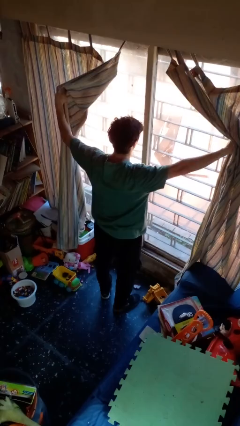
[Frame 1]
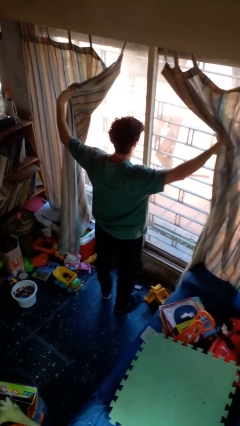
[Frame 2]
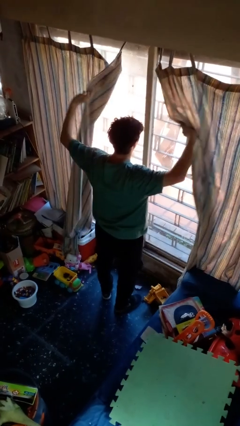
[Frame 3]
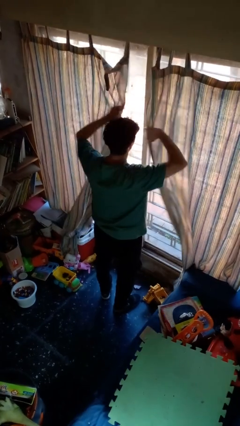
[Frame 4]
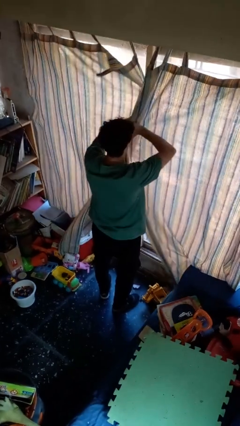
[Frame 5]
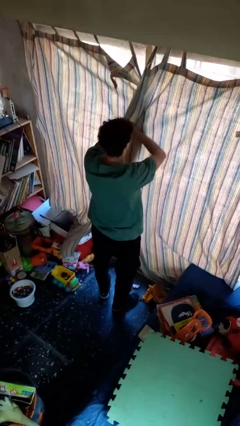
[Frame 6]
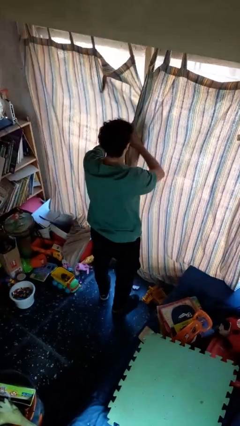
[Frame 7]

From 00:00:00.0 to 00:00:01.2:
person closes curtains

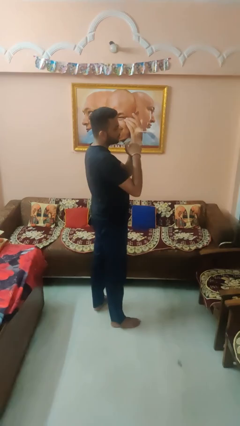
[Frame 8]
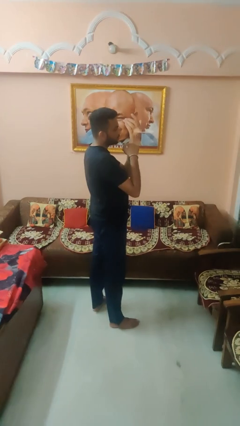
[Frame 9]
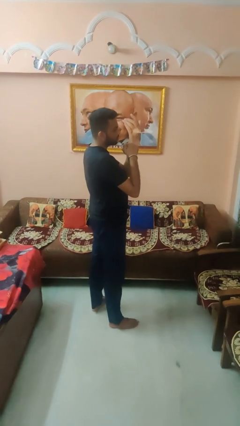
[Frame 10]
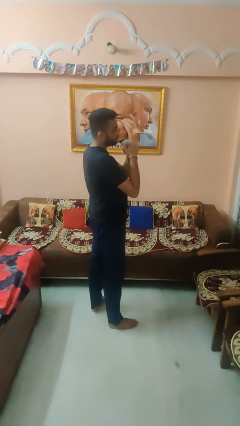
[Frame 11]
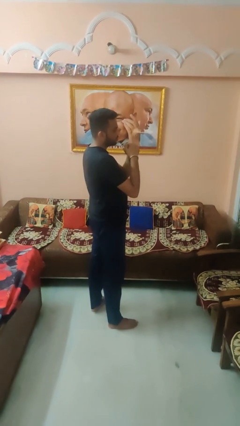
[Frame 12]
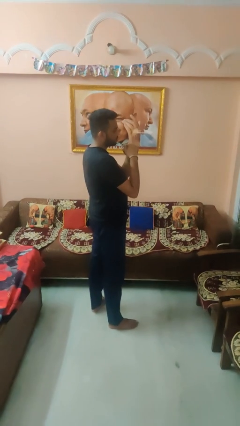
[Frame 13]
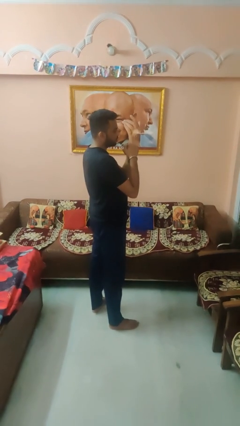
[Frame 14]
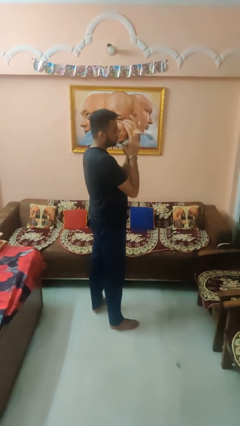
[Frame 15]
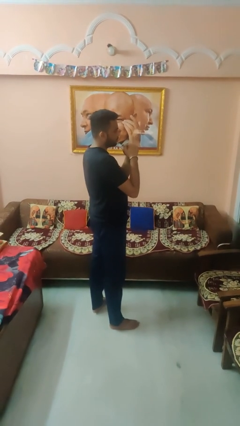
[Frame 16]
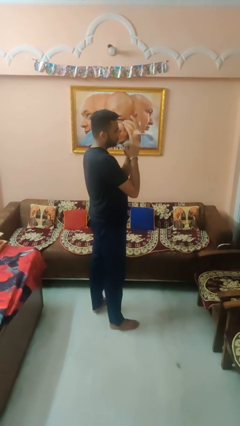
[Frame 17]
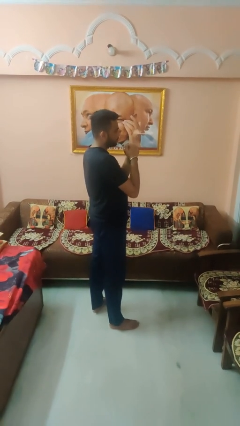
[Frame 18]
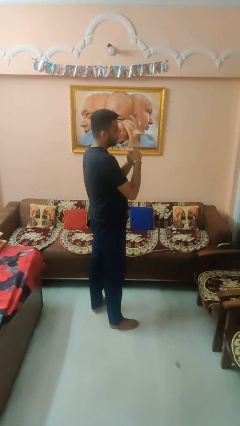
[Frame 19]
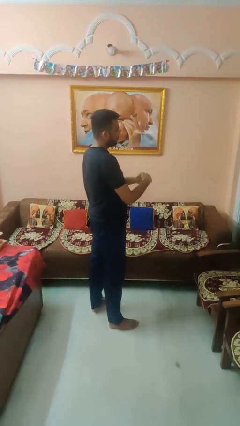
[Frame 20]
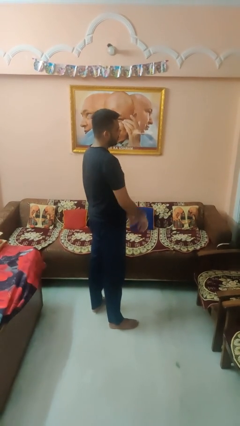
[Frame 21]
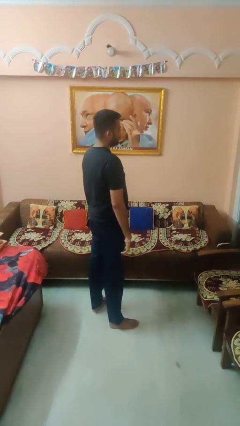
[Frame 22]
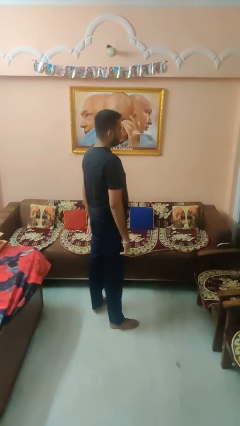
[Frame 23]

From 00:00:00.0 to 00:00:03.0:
person cracks knuckles

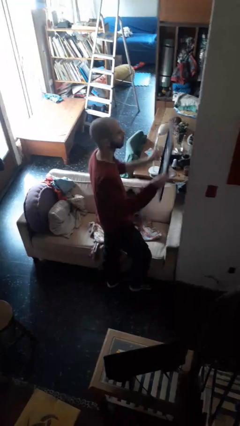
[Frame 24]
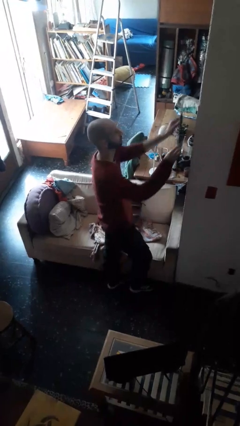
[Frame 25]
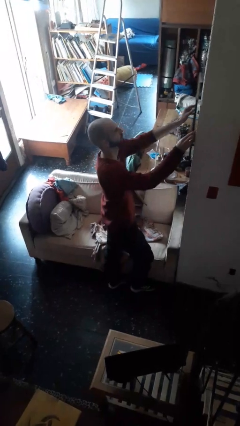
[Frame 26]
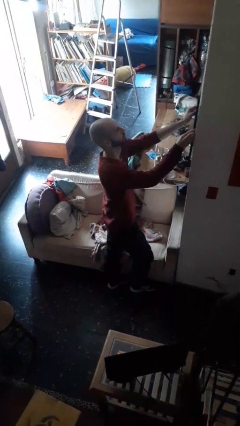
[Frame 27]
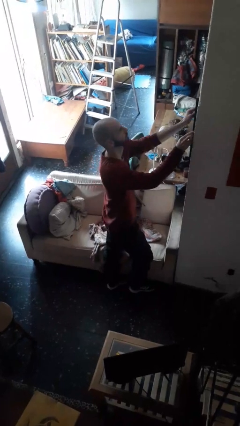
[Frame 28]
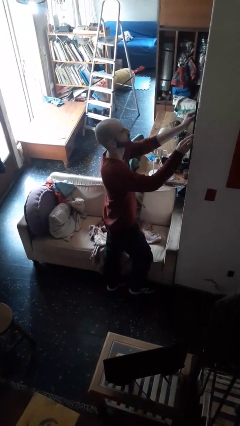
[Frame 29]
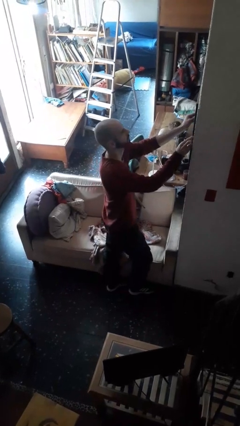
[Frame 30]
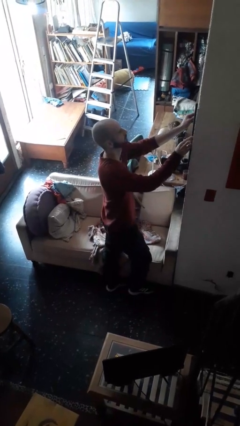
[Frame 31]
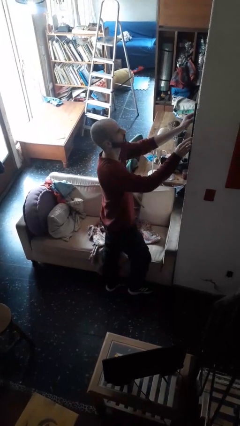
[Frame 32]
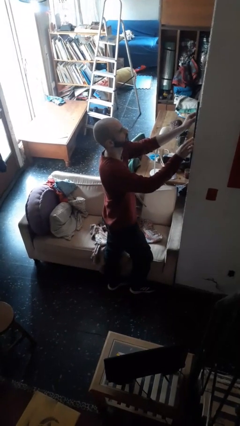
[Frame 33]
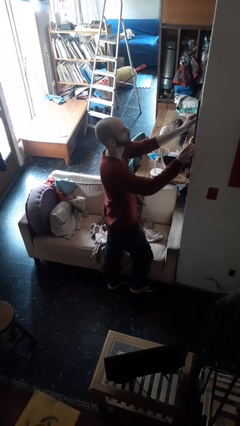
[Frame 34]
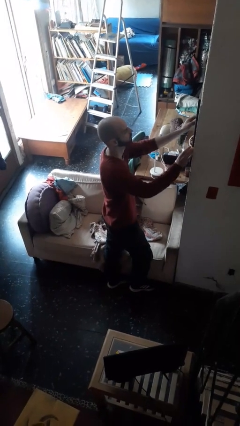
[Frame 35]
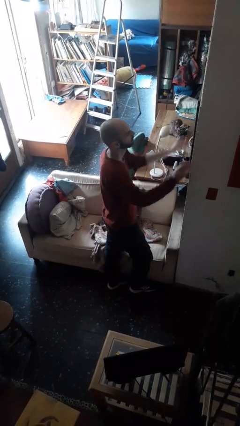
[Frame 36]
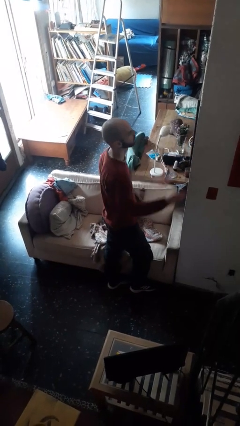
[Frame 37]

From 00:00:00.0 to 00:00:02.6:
person puts up picture frame

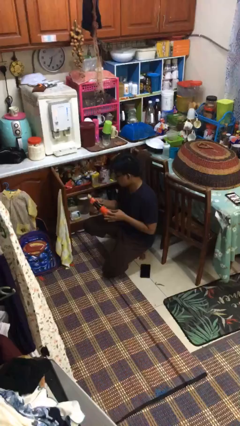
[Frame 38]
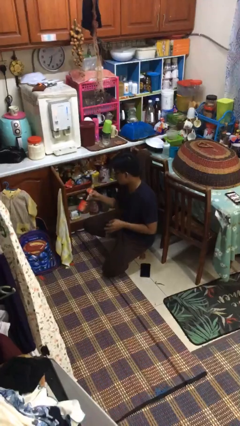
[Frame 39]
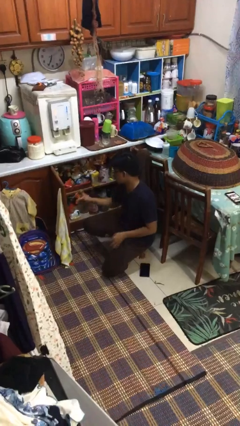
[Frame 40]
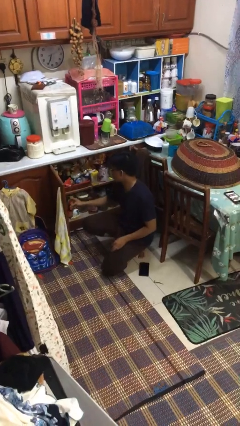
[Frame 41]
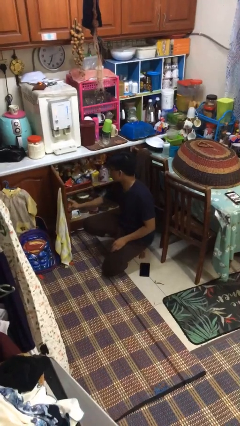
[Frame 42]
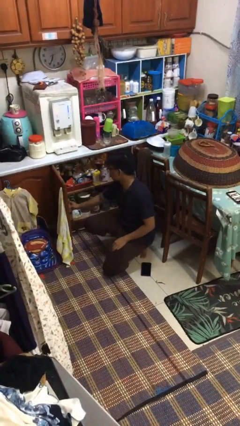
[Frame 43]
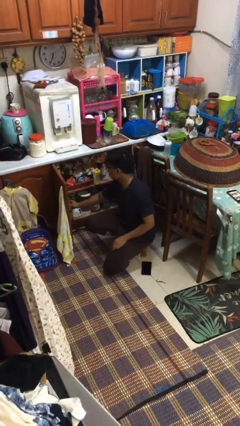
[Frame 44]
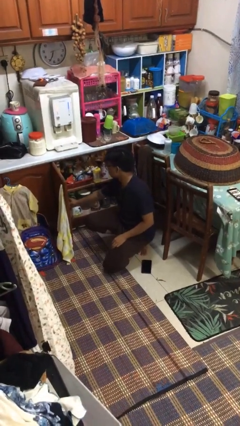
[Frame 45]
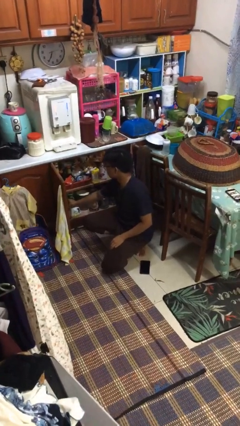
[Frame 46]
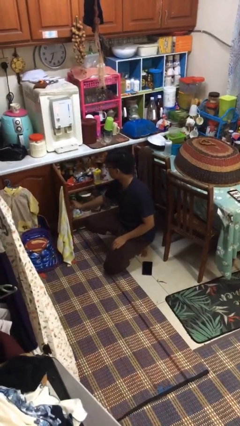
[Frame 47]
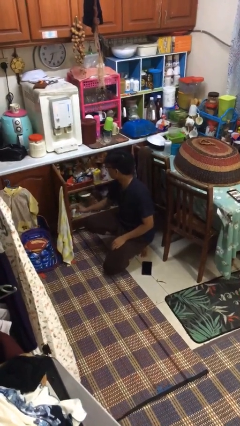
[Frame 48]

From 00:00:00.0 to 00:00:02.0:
person puts object in cabinet

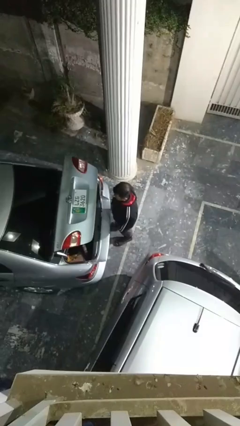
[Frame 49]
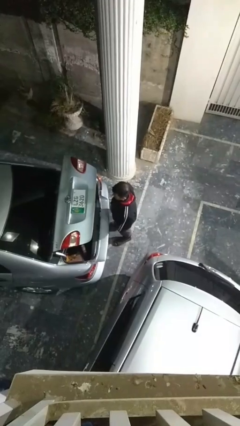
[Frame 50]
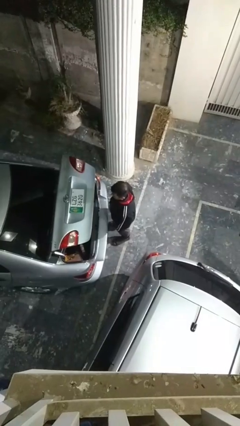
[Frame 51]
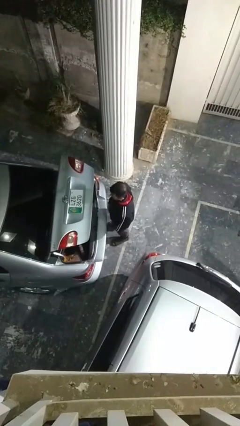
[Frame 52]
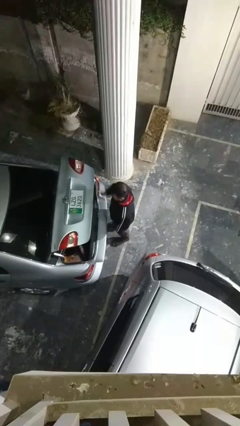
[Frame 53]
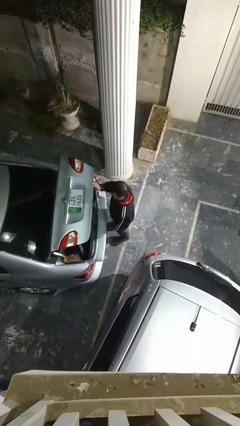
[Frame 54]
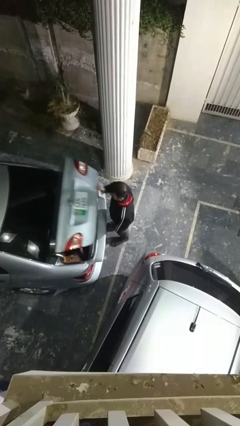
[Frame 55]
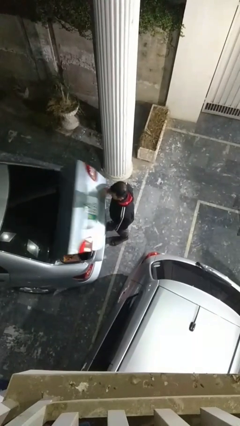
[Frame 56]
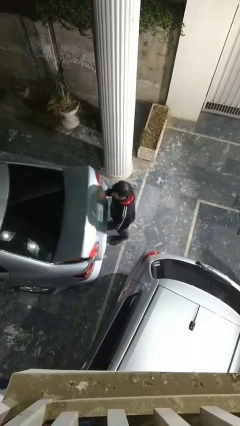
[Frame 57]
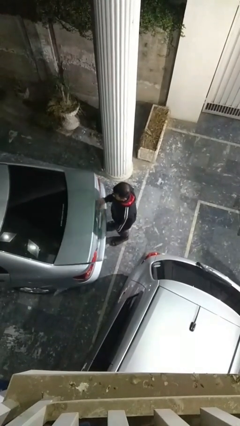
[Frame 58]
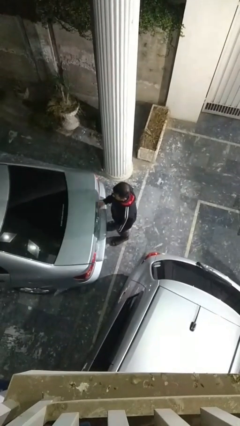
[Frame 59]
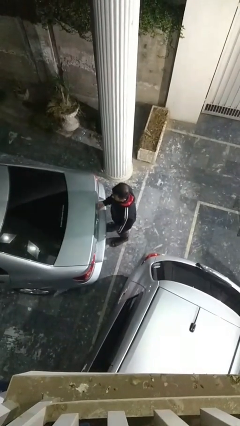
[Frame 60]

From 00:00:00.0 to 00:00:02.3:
person closes car trunk

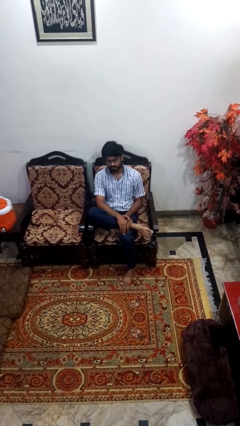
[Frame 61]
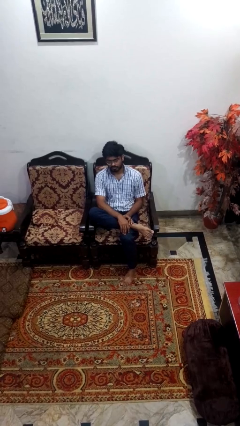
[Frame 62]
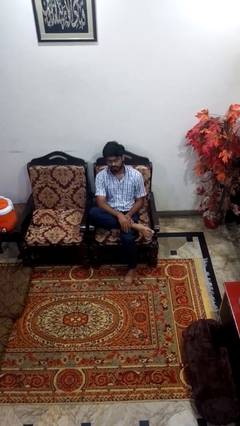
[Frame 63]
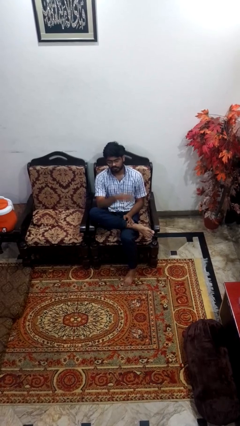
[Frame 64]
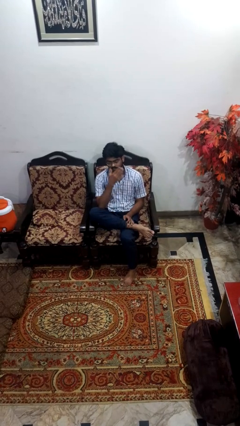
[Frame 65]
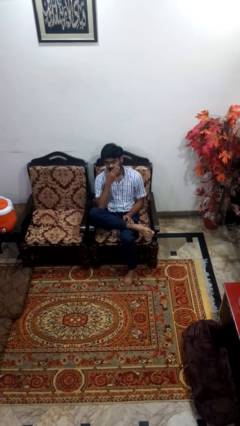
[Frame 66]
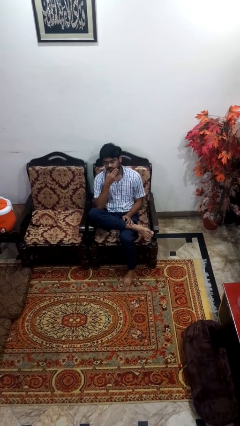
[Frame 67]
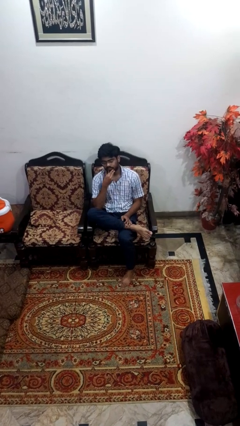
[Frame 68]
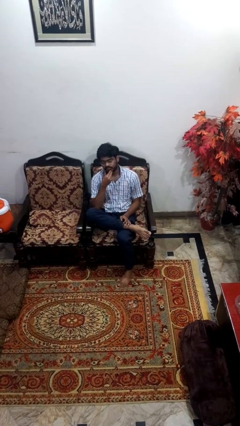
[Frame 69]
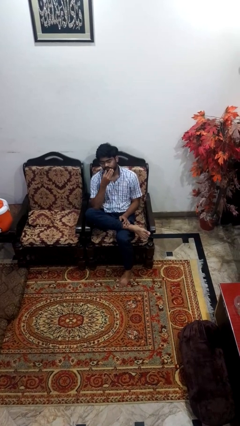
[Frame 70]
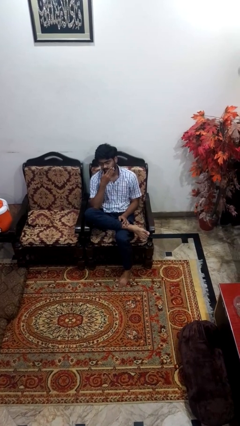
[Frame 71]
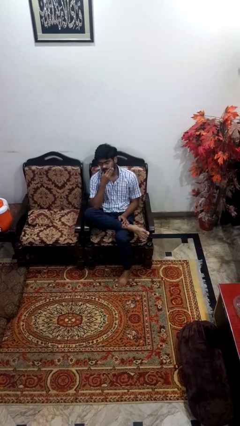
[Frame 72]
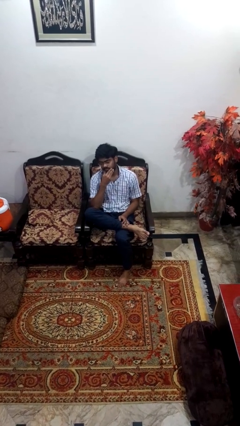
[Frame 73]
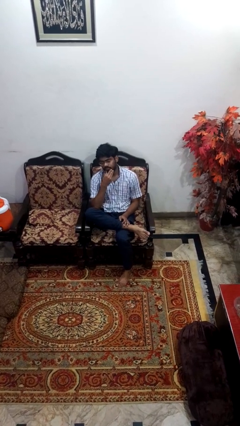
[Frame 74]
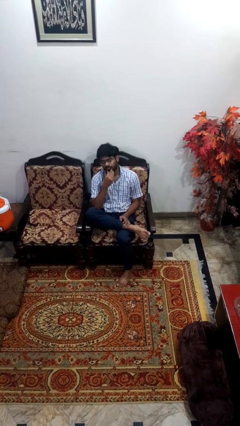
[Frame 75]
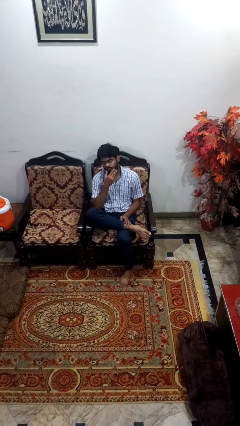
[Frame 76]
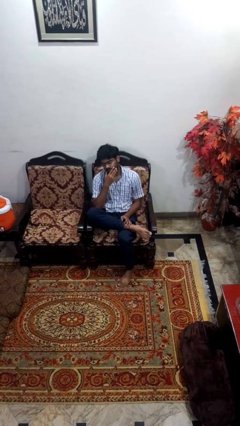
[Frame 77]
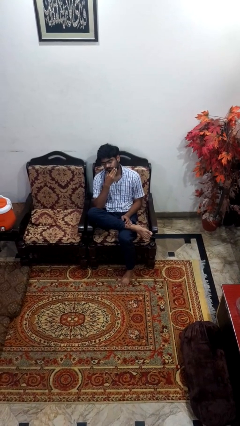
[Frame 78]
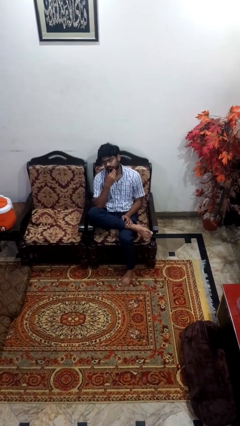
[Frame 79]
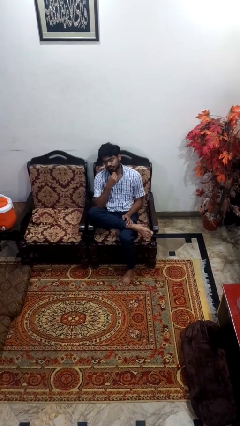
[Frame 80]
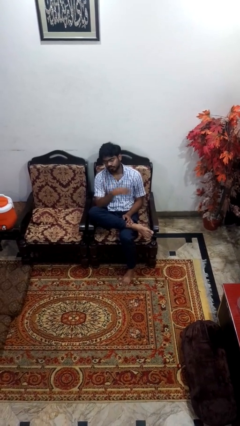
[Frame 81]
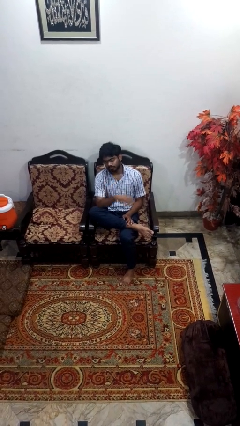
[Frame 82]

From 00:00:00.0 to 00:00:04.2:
person strokes chin

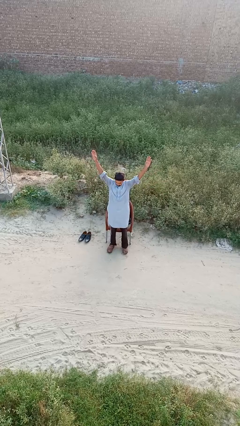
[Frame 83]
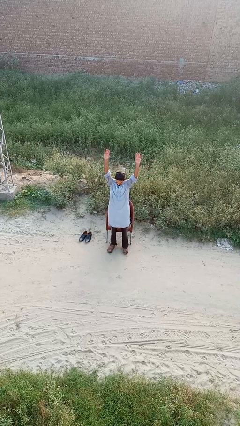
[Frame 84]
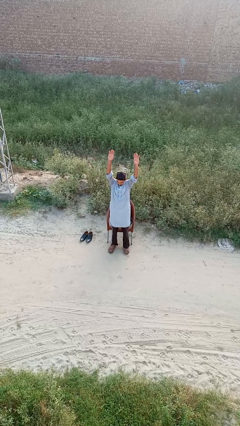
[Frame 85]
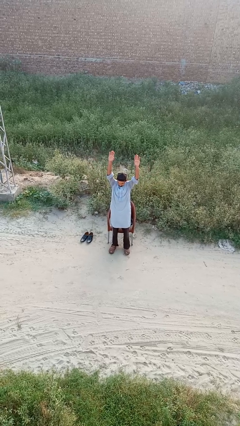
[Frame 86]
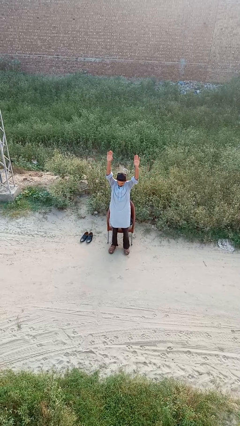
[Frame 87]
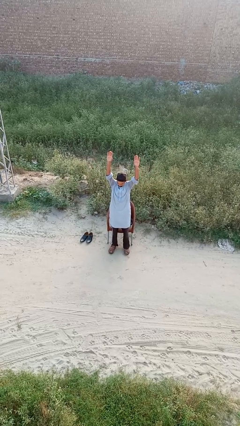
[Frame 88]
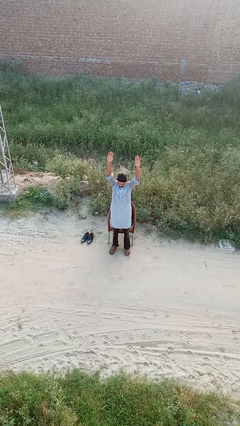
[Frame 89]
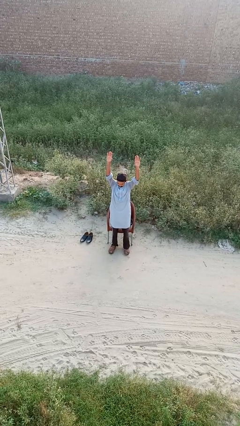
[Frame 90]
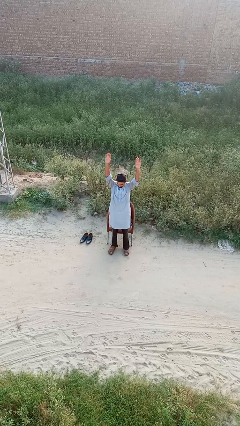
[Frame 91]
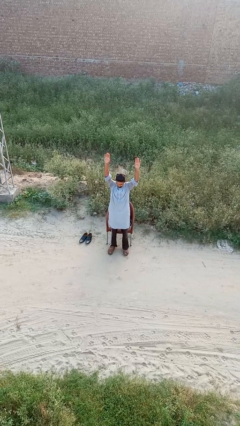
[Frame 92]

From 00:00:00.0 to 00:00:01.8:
person stretches arms over head
